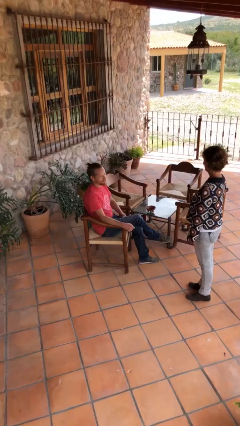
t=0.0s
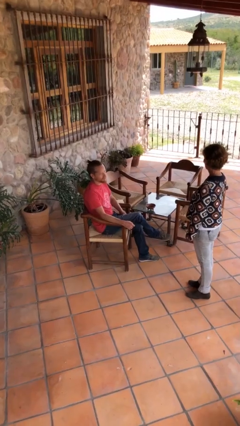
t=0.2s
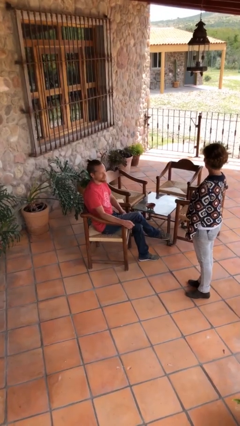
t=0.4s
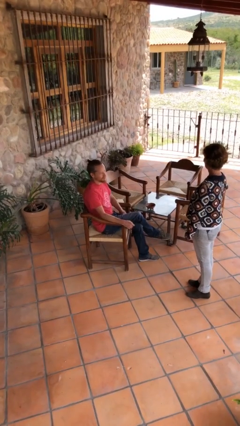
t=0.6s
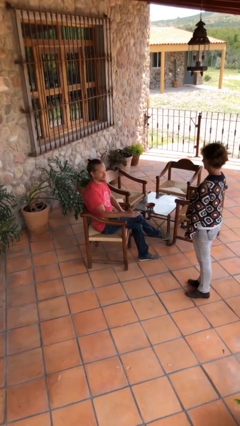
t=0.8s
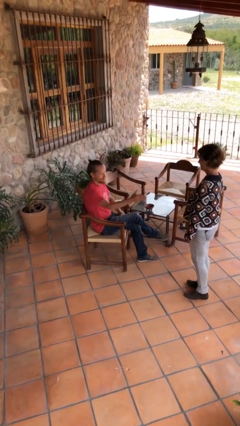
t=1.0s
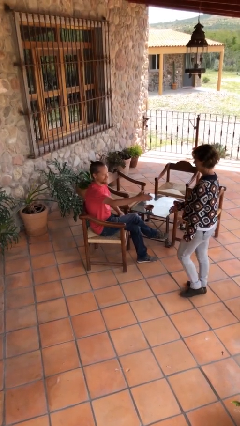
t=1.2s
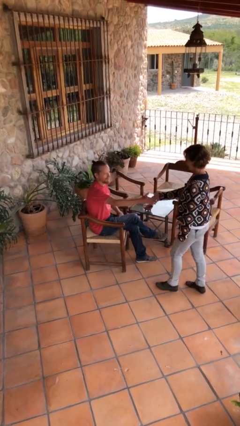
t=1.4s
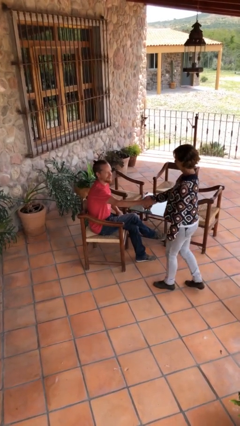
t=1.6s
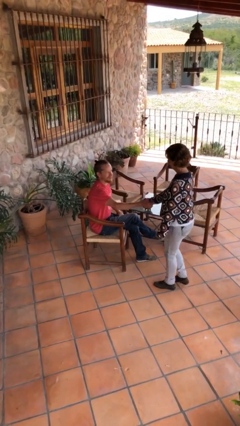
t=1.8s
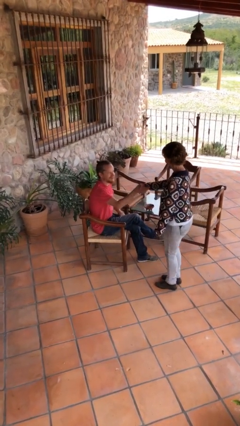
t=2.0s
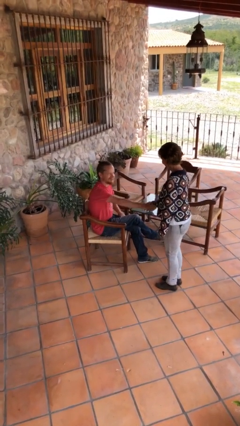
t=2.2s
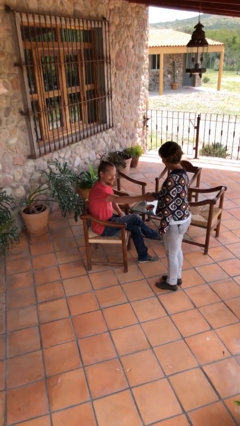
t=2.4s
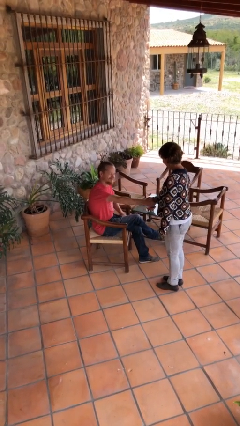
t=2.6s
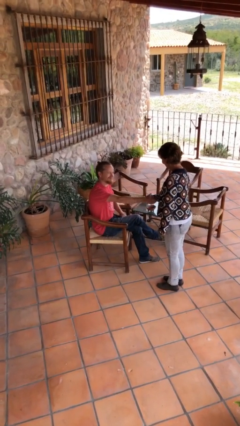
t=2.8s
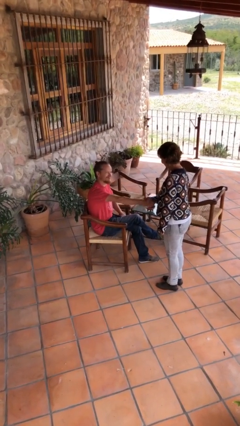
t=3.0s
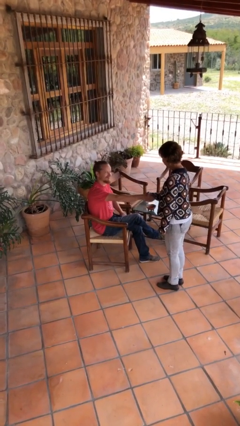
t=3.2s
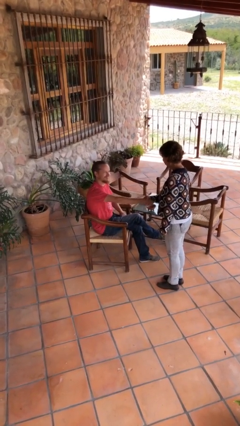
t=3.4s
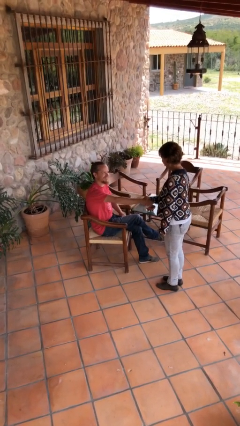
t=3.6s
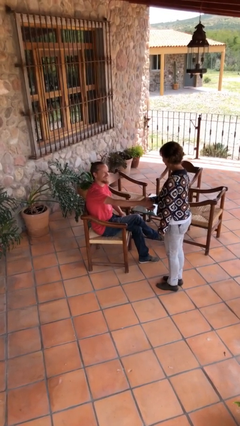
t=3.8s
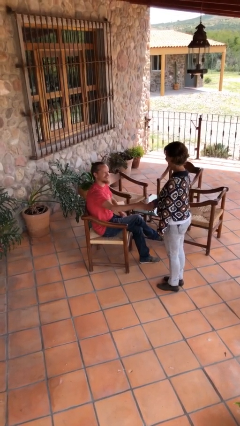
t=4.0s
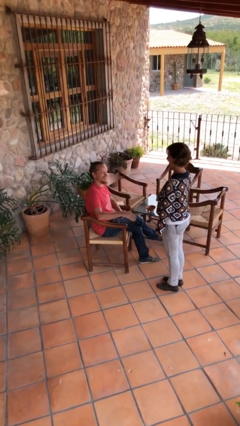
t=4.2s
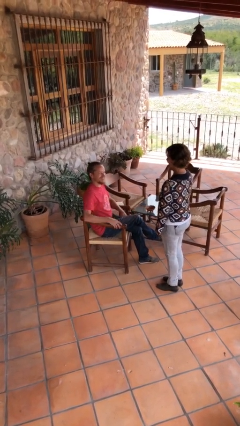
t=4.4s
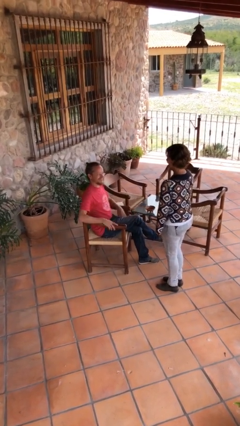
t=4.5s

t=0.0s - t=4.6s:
person shakes hand

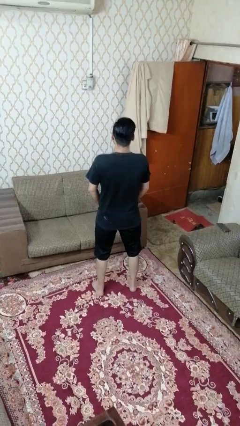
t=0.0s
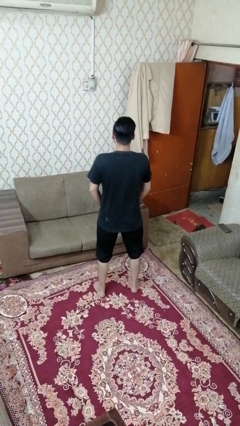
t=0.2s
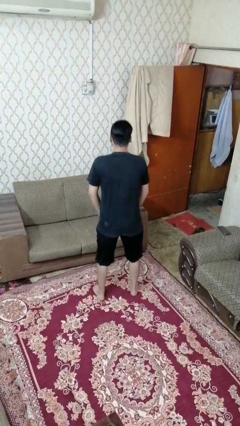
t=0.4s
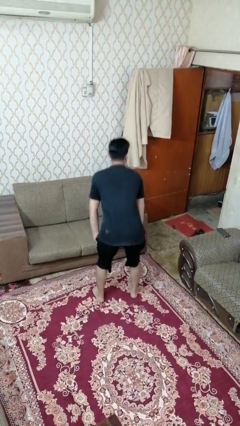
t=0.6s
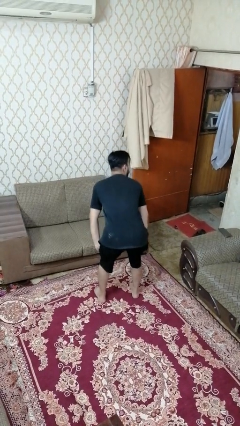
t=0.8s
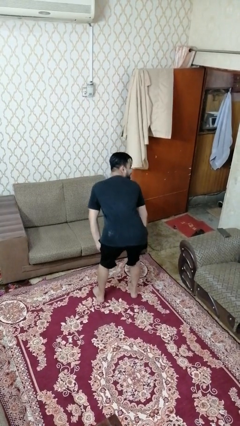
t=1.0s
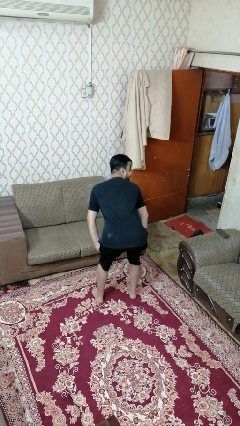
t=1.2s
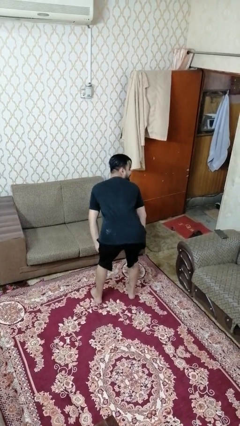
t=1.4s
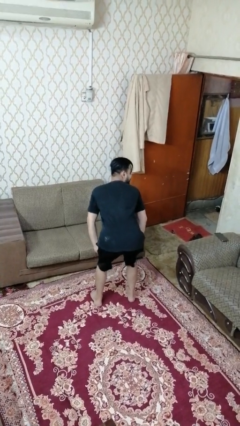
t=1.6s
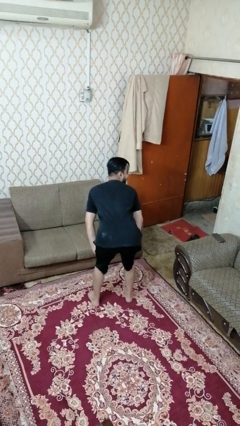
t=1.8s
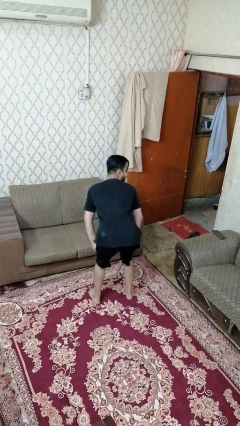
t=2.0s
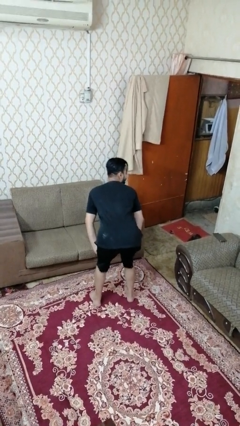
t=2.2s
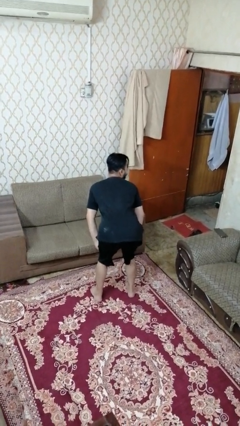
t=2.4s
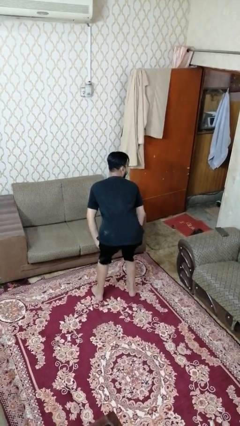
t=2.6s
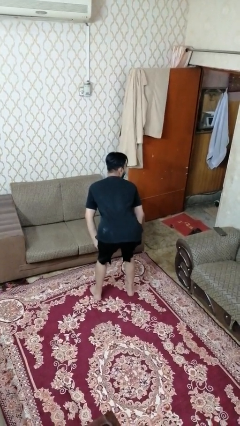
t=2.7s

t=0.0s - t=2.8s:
person wiggles hips

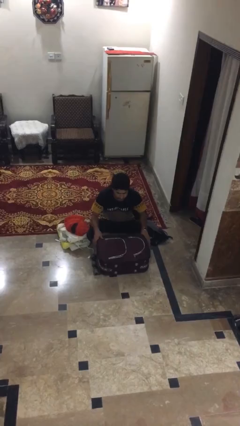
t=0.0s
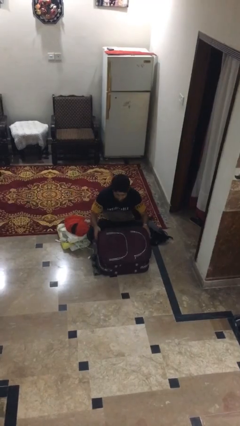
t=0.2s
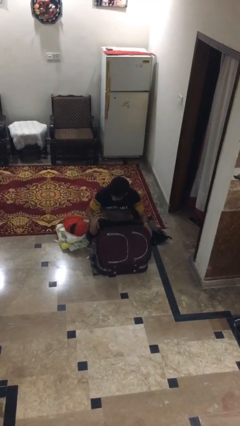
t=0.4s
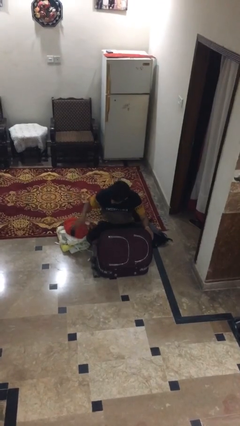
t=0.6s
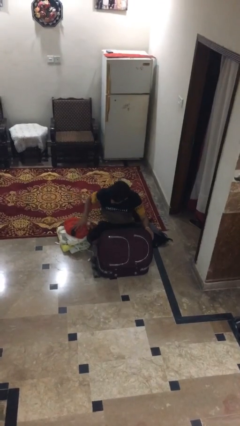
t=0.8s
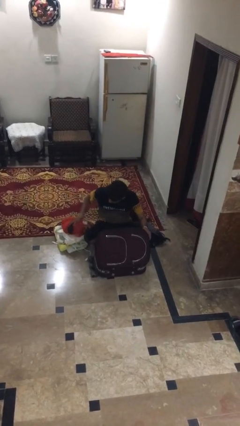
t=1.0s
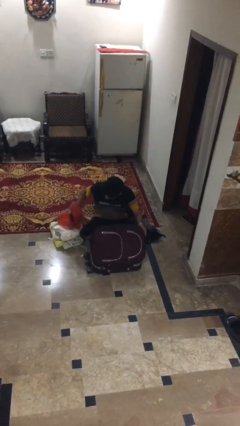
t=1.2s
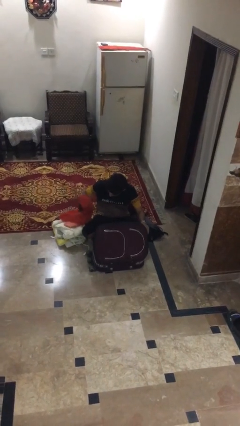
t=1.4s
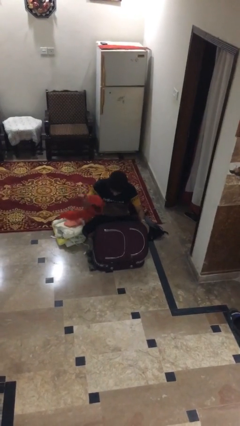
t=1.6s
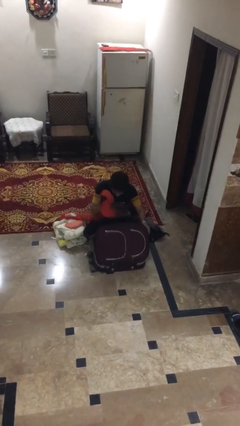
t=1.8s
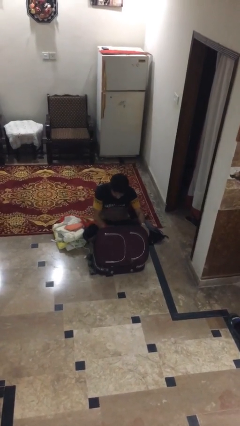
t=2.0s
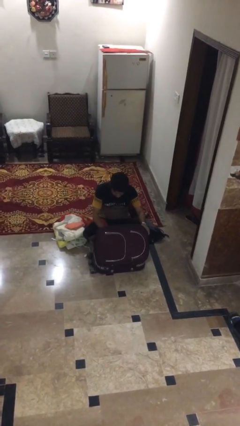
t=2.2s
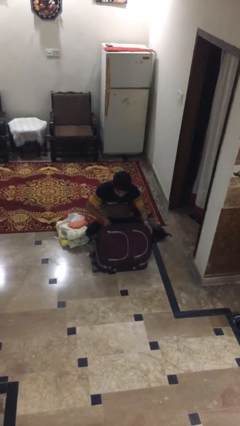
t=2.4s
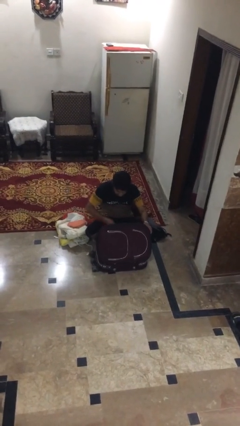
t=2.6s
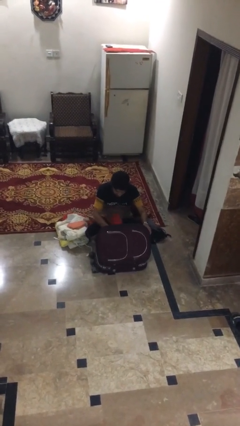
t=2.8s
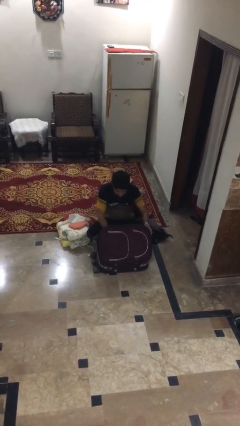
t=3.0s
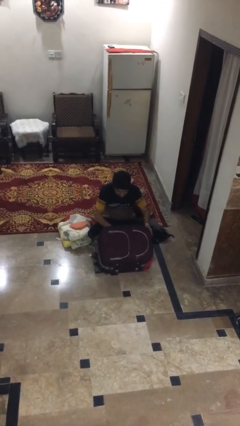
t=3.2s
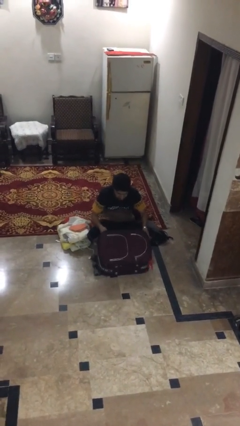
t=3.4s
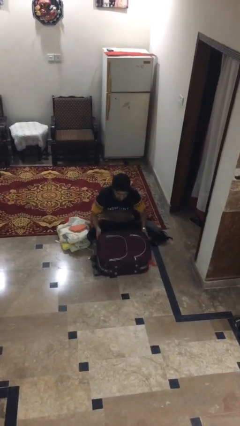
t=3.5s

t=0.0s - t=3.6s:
person loads clothes into suitcase

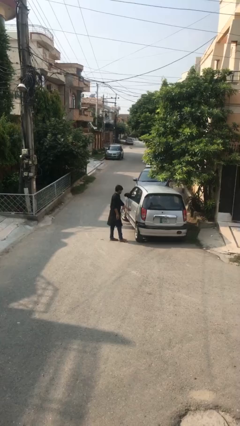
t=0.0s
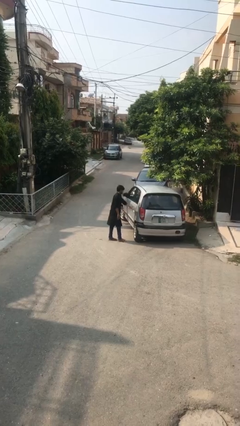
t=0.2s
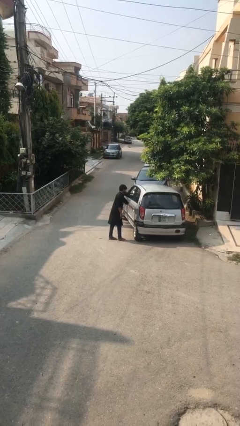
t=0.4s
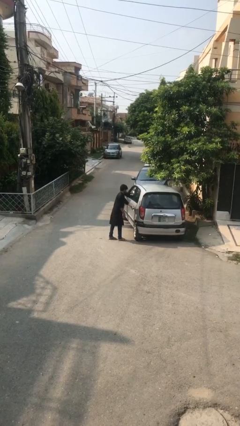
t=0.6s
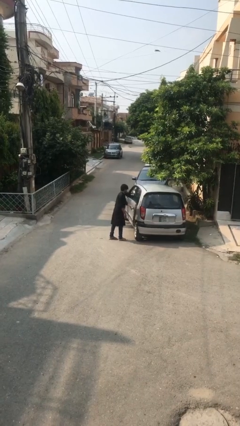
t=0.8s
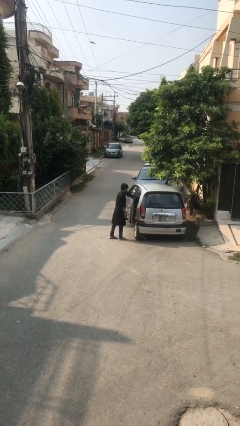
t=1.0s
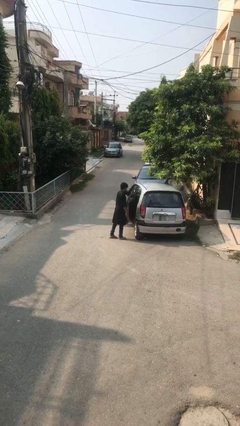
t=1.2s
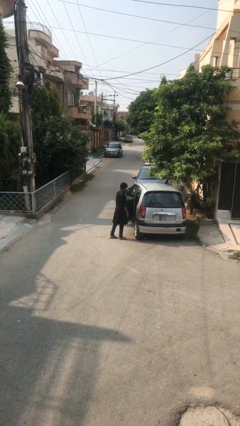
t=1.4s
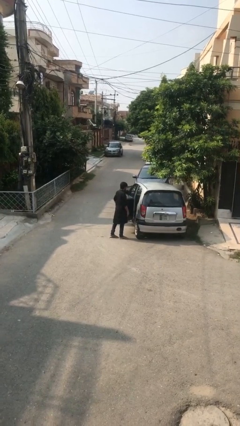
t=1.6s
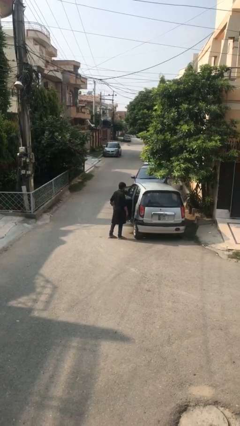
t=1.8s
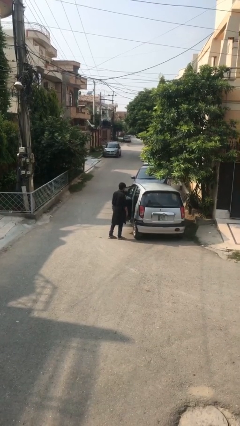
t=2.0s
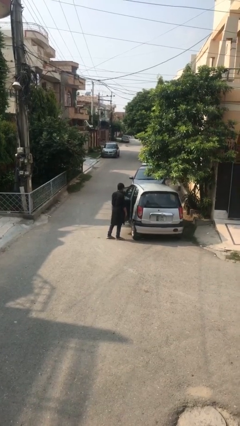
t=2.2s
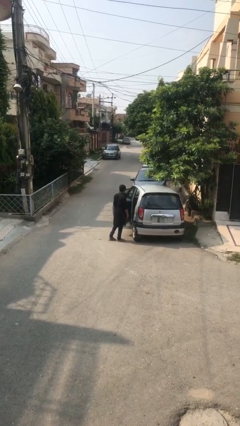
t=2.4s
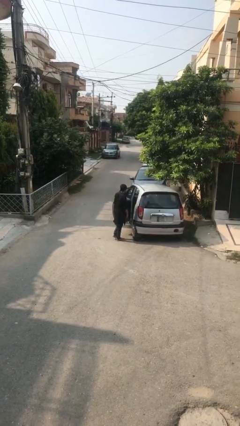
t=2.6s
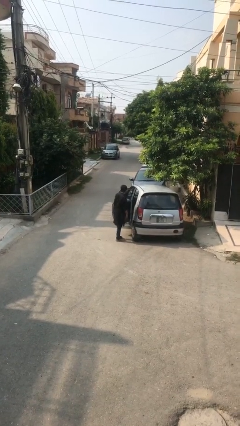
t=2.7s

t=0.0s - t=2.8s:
person opens car door

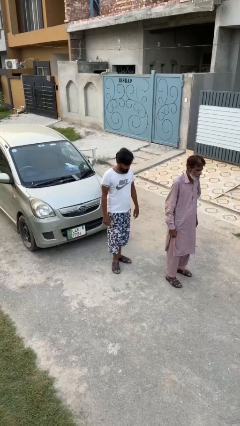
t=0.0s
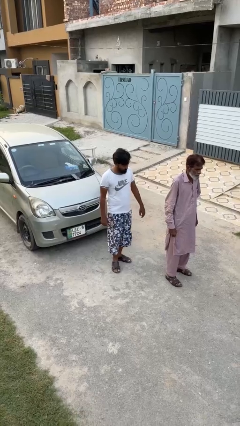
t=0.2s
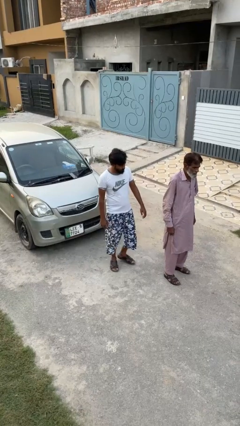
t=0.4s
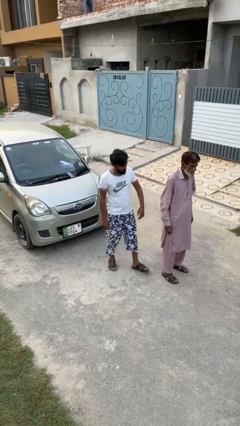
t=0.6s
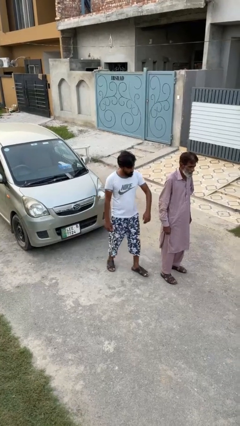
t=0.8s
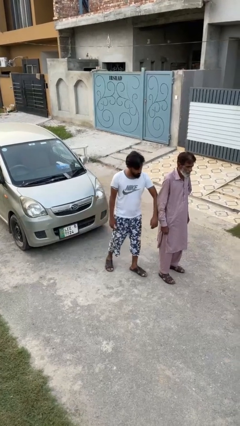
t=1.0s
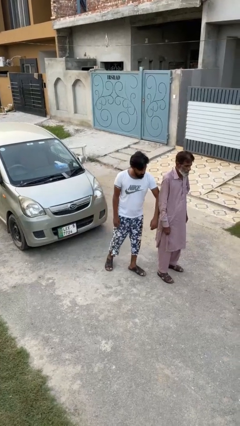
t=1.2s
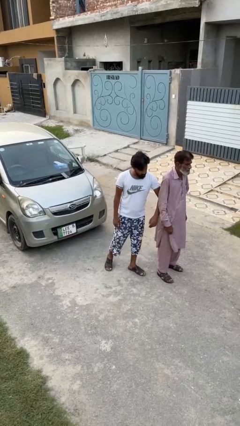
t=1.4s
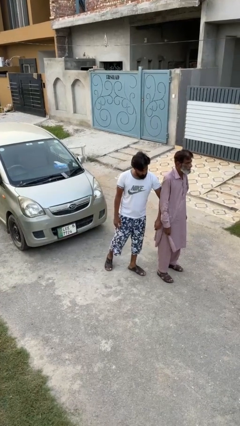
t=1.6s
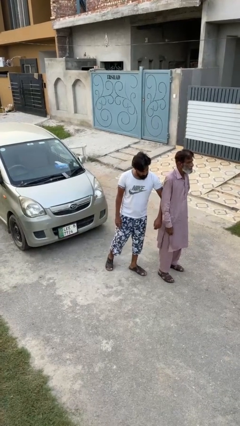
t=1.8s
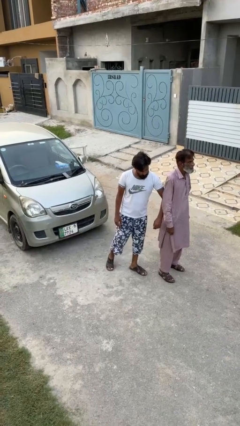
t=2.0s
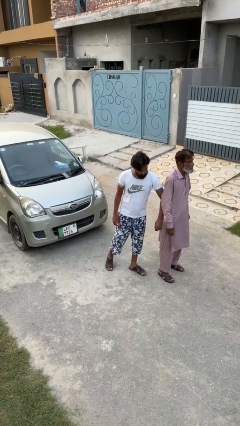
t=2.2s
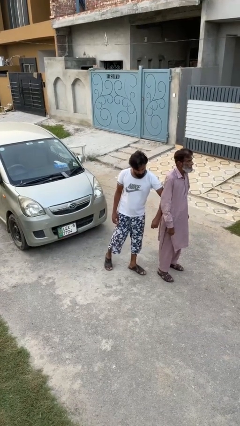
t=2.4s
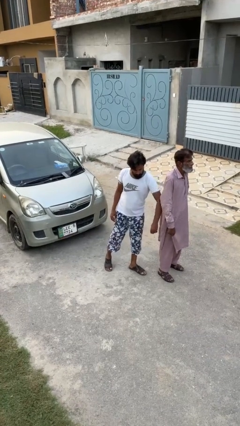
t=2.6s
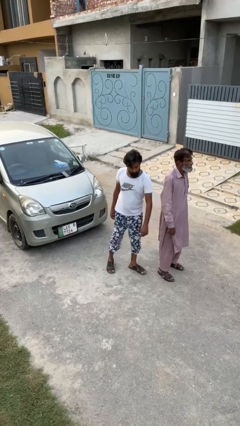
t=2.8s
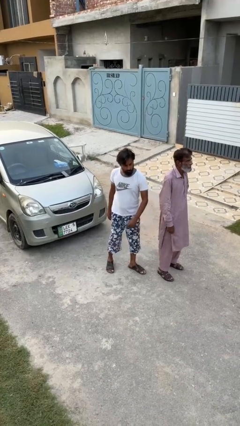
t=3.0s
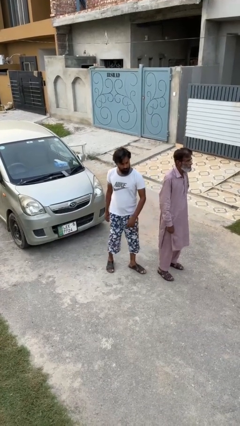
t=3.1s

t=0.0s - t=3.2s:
person nudges person with elbow

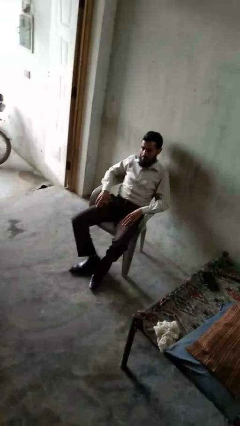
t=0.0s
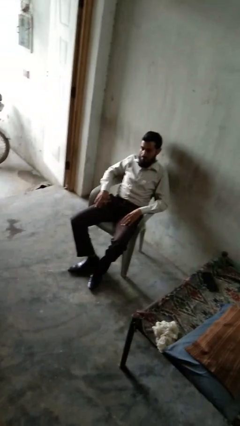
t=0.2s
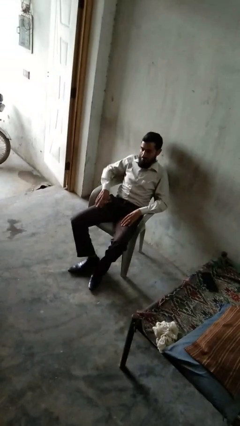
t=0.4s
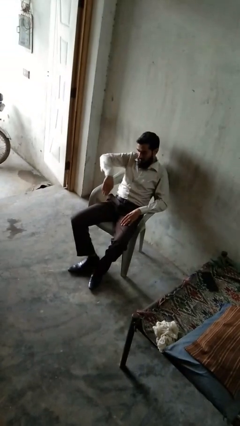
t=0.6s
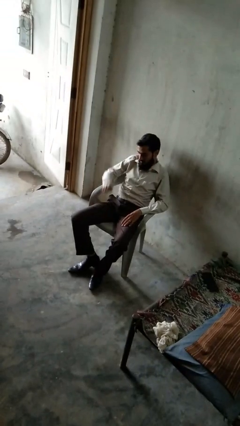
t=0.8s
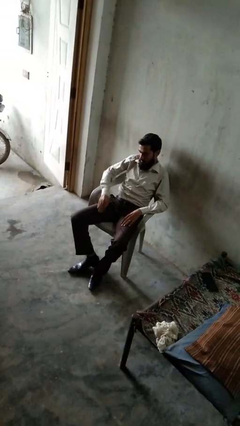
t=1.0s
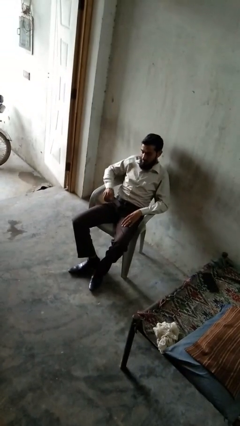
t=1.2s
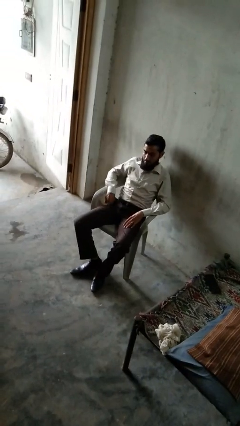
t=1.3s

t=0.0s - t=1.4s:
person slaps hands on thighs
